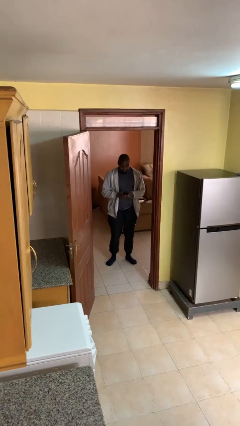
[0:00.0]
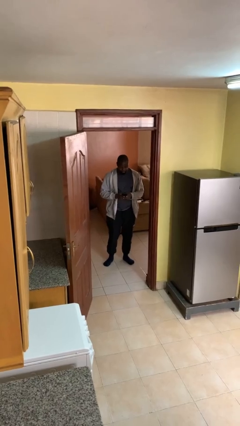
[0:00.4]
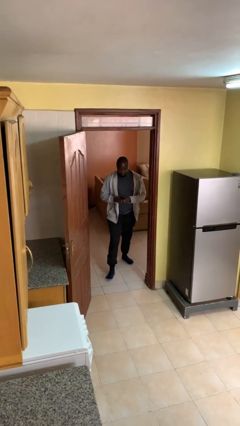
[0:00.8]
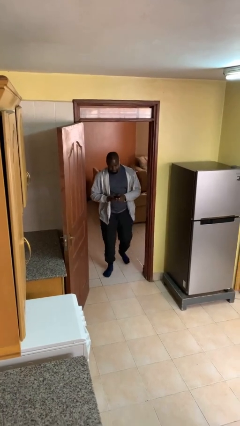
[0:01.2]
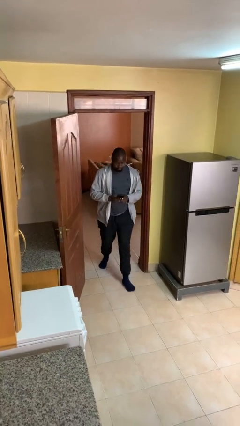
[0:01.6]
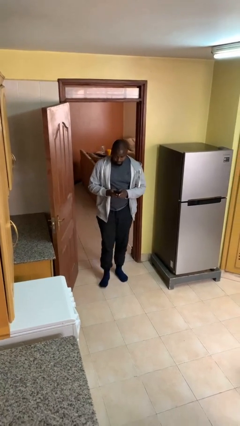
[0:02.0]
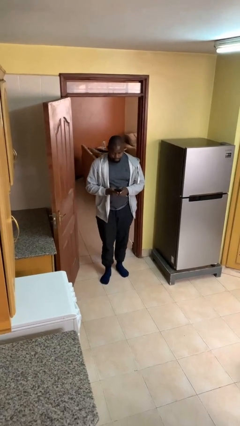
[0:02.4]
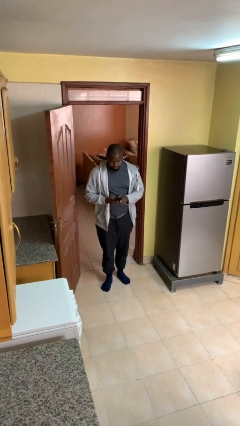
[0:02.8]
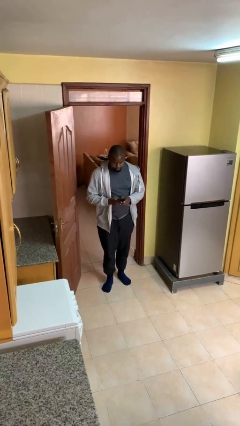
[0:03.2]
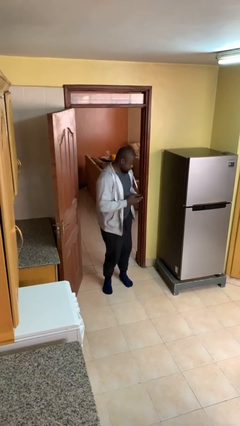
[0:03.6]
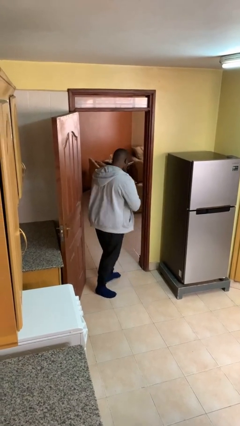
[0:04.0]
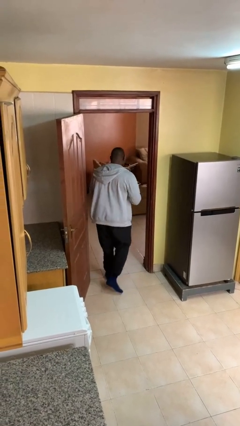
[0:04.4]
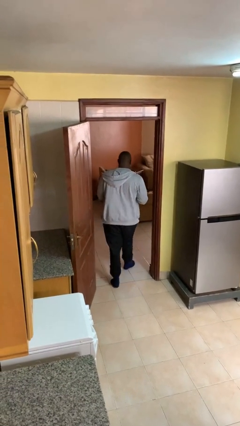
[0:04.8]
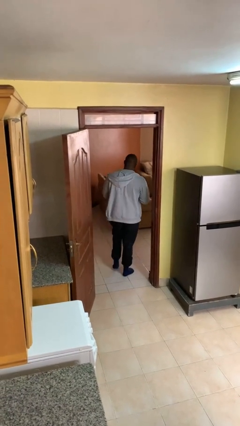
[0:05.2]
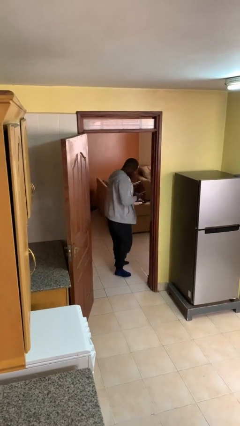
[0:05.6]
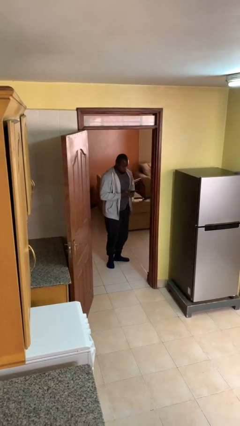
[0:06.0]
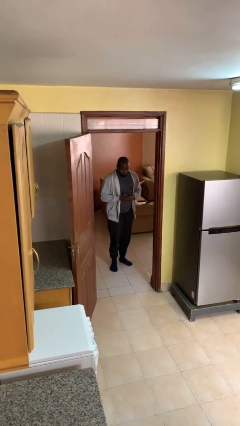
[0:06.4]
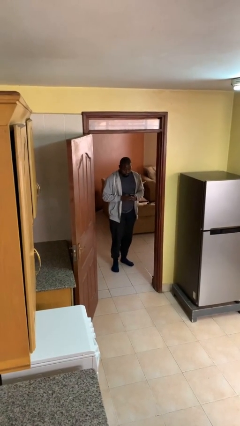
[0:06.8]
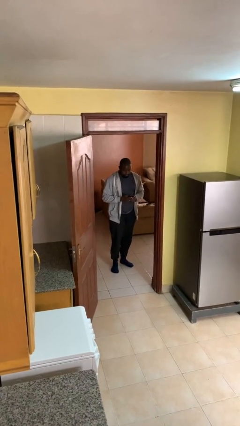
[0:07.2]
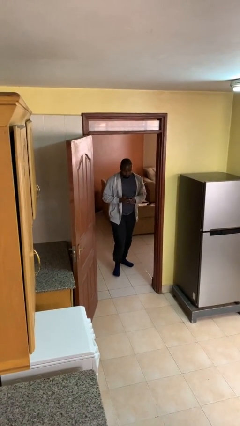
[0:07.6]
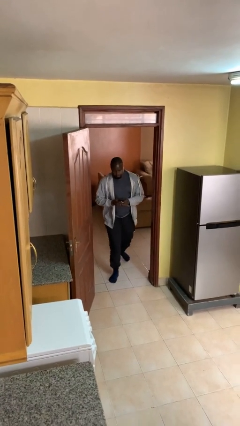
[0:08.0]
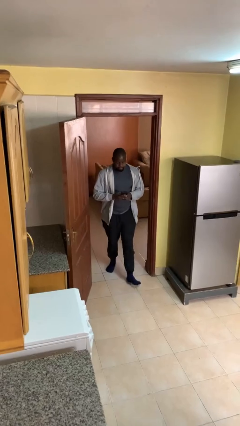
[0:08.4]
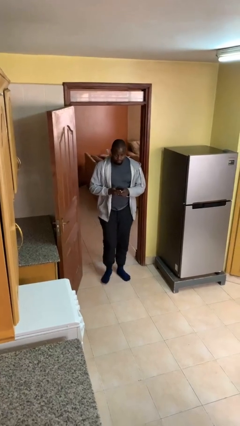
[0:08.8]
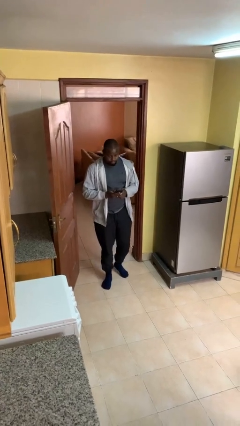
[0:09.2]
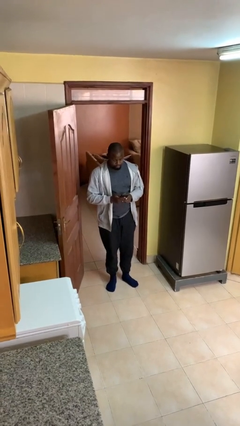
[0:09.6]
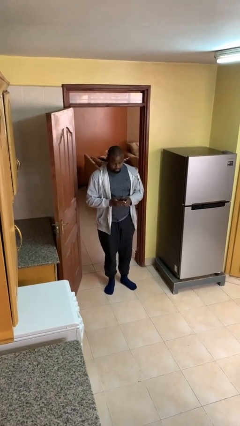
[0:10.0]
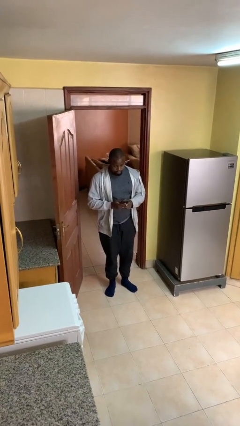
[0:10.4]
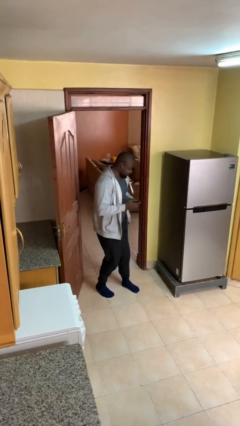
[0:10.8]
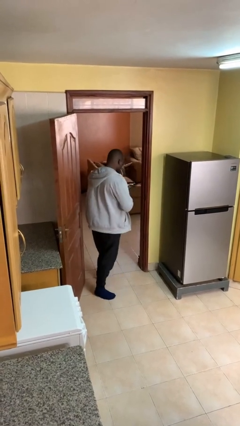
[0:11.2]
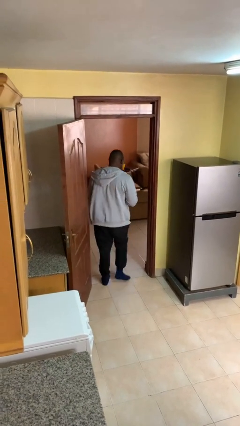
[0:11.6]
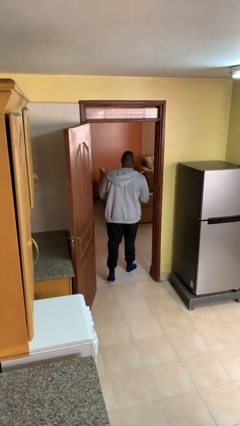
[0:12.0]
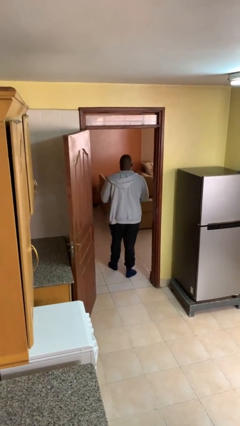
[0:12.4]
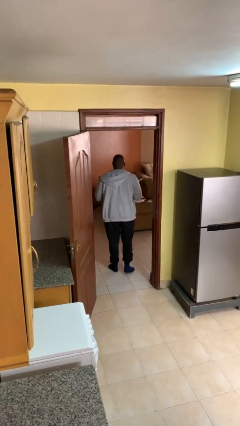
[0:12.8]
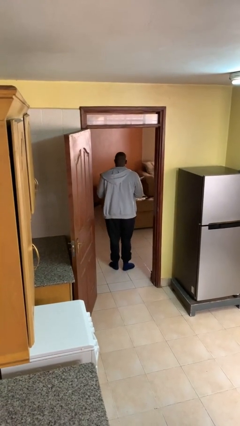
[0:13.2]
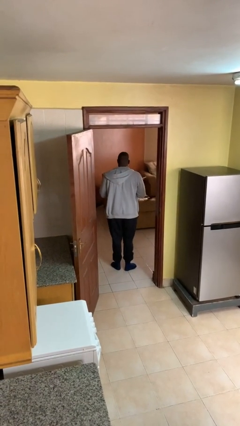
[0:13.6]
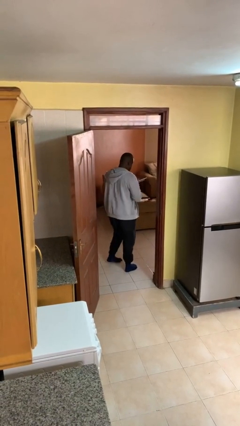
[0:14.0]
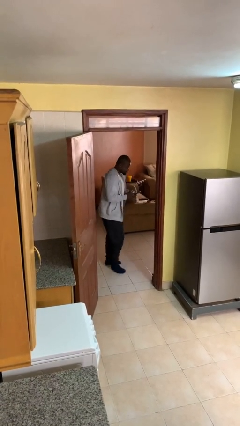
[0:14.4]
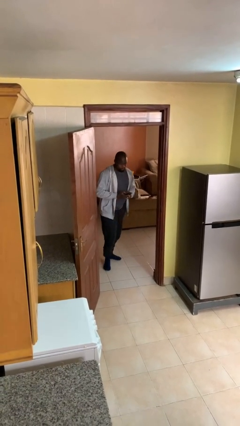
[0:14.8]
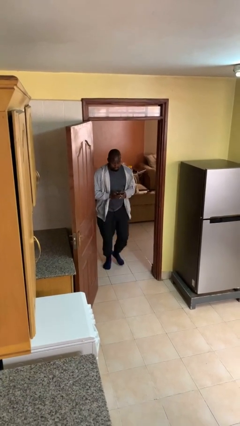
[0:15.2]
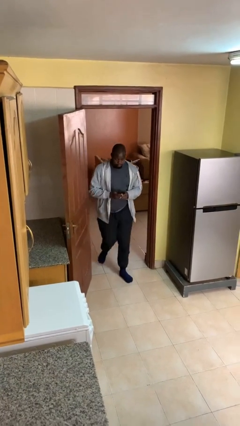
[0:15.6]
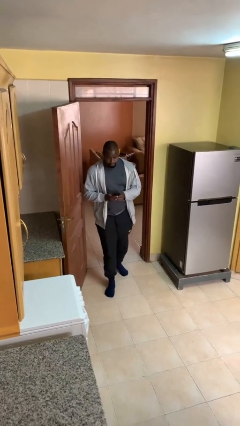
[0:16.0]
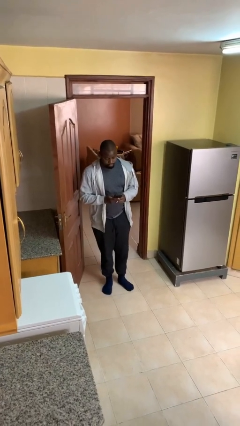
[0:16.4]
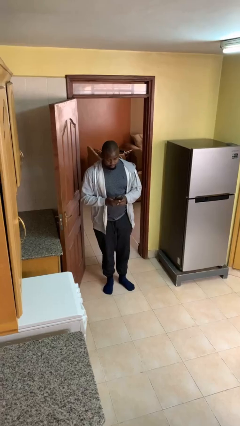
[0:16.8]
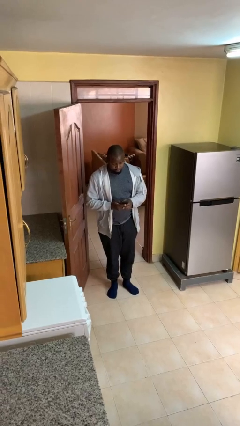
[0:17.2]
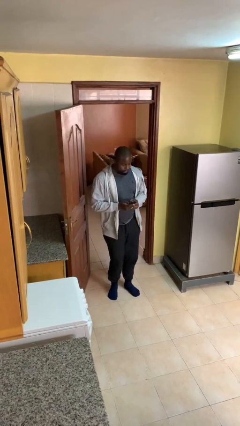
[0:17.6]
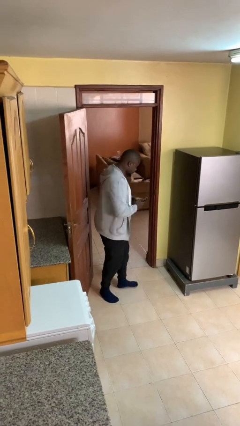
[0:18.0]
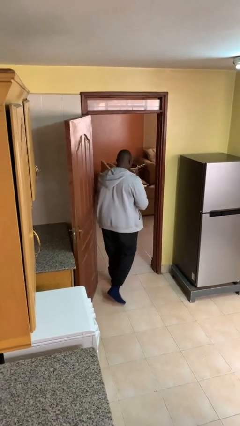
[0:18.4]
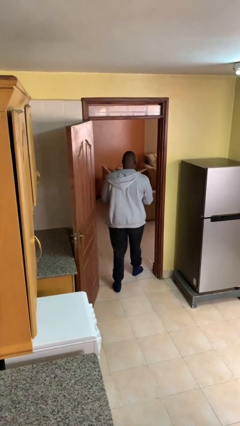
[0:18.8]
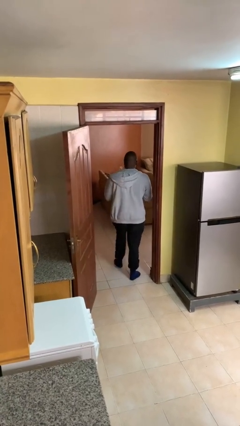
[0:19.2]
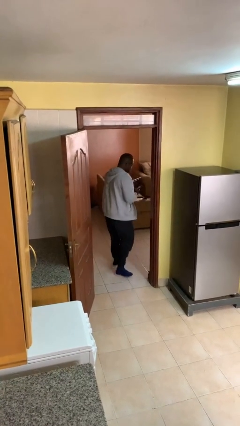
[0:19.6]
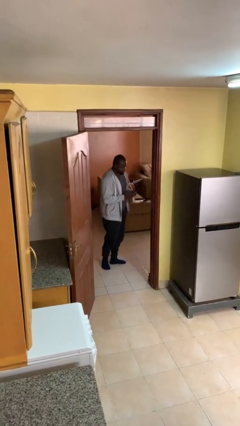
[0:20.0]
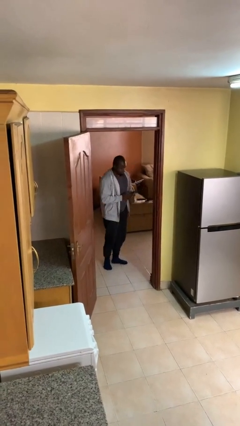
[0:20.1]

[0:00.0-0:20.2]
person texts on phone

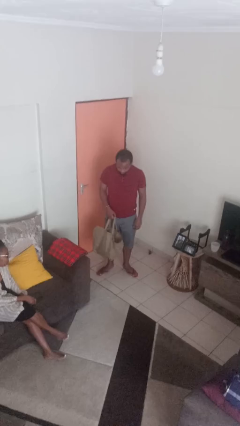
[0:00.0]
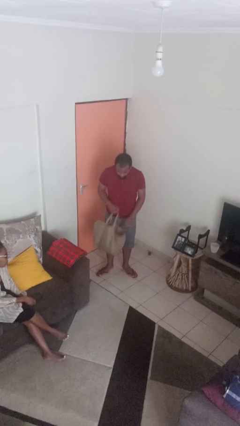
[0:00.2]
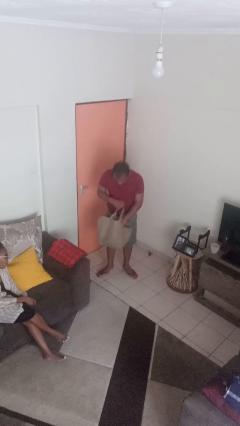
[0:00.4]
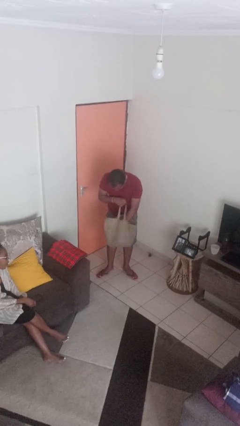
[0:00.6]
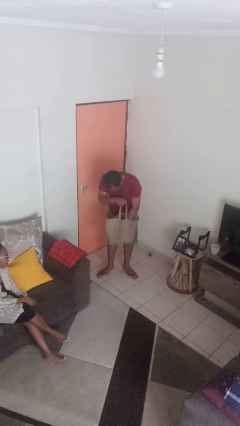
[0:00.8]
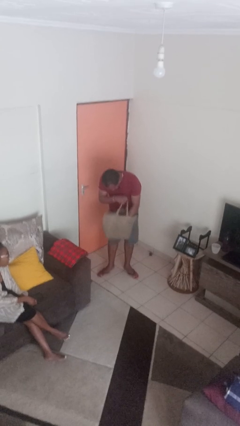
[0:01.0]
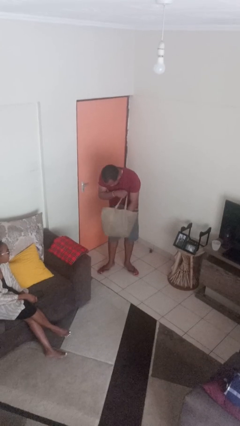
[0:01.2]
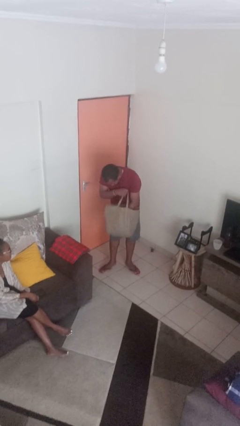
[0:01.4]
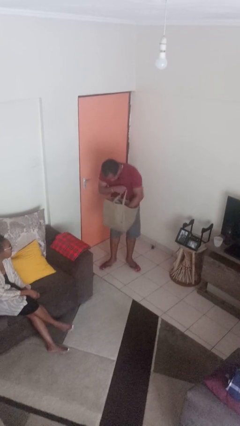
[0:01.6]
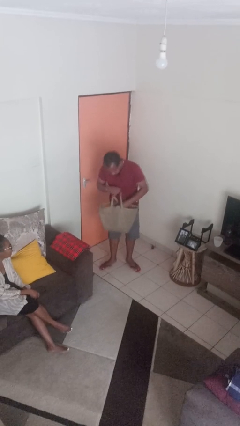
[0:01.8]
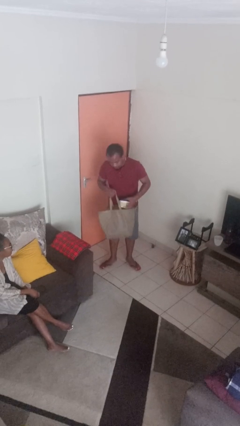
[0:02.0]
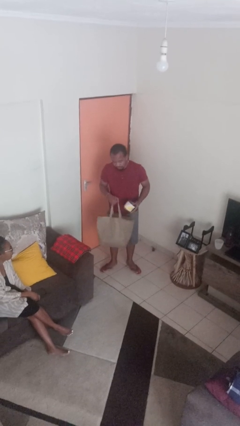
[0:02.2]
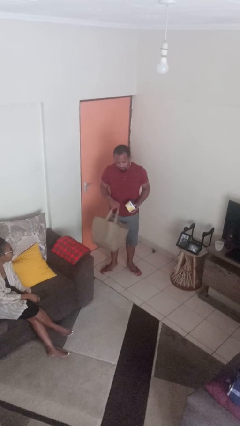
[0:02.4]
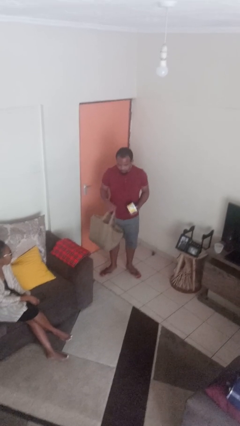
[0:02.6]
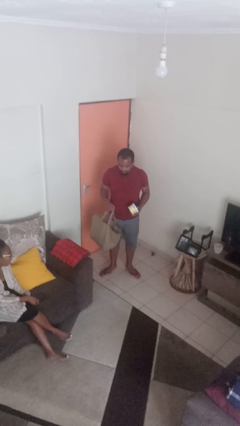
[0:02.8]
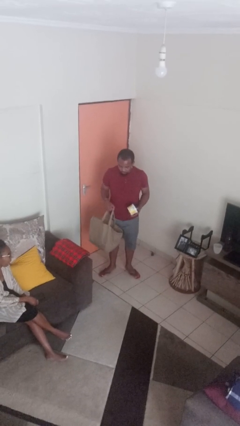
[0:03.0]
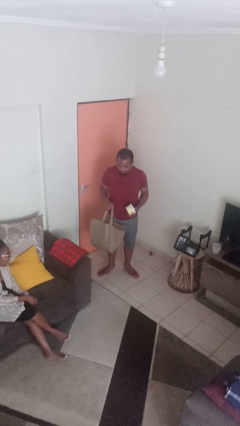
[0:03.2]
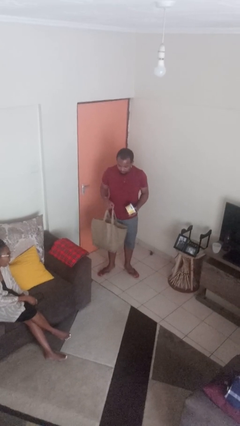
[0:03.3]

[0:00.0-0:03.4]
person takes object from bag

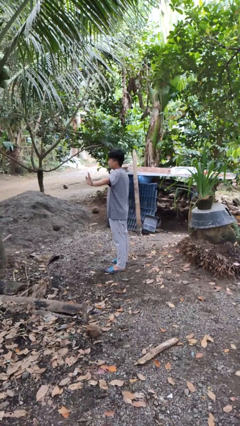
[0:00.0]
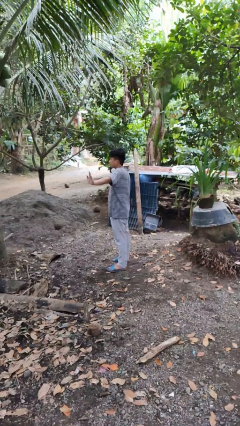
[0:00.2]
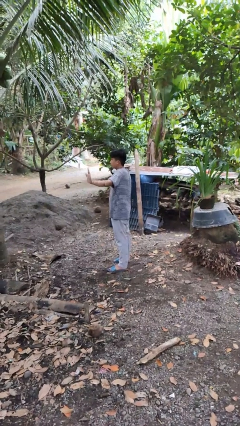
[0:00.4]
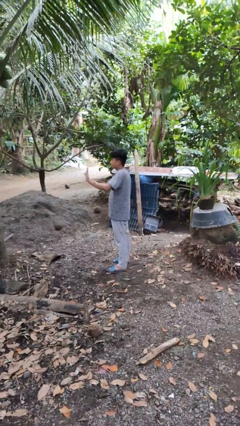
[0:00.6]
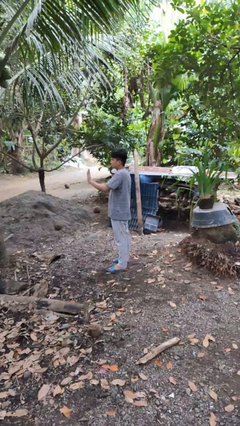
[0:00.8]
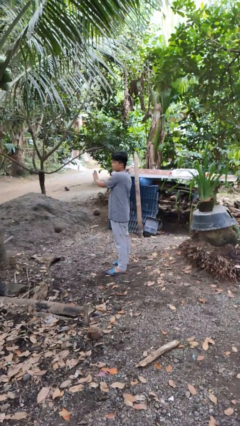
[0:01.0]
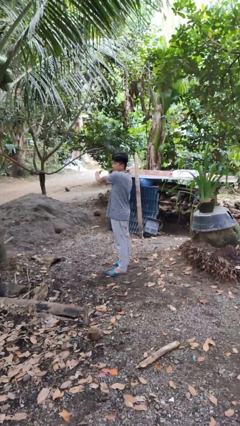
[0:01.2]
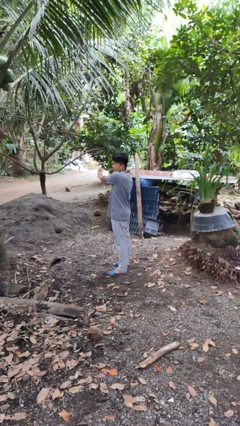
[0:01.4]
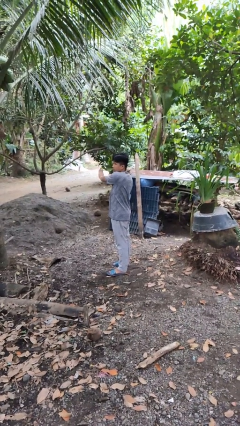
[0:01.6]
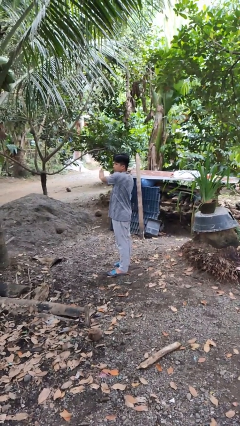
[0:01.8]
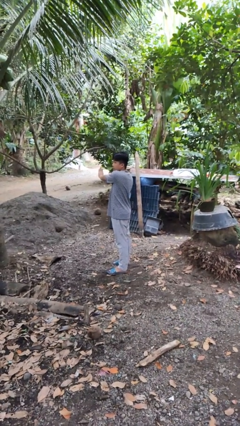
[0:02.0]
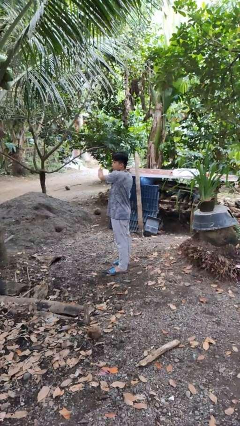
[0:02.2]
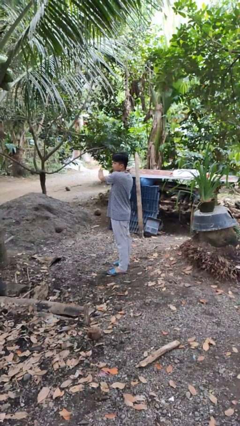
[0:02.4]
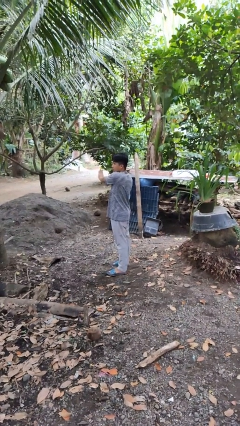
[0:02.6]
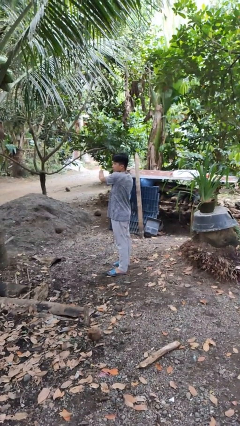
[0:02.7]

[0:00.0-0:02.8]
person gestures swipe right

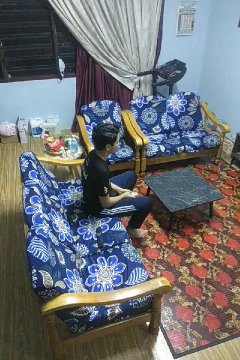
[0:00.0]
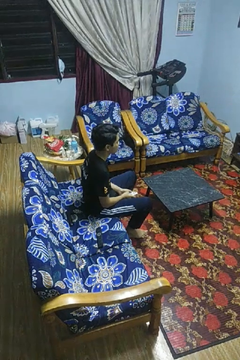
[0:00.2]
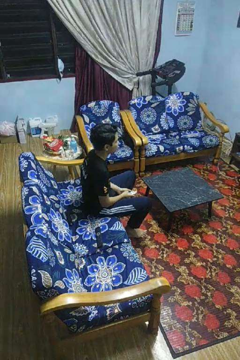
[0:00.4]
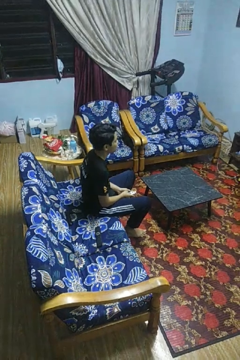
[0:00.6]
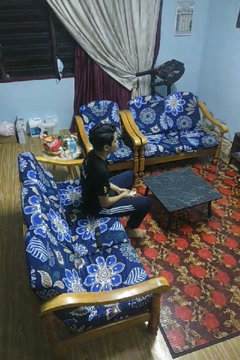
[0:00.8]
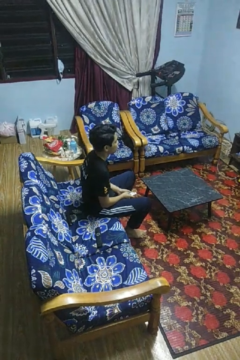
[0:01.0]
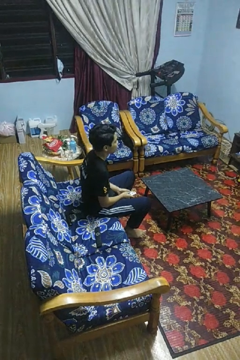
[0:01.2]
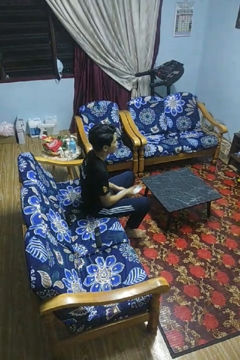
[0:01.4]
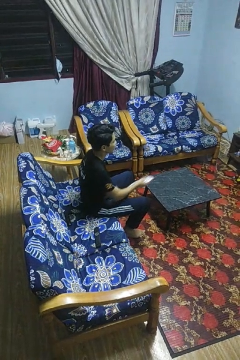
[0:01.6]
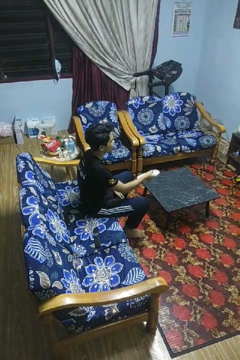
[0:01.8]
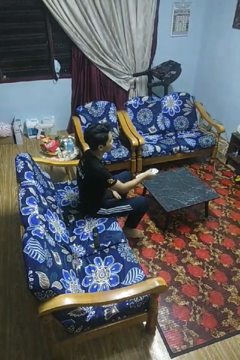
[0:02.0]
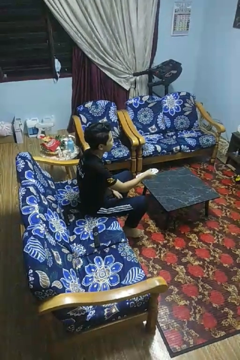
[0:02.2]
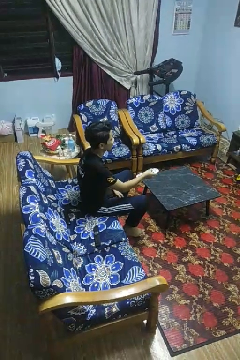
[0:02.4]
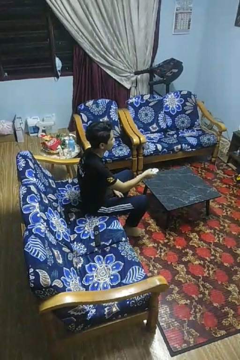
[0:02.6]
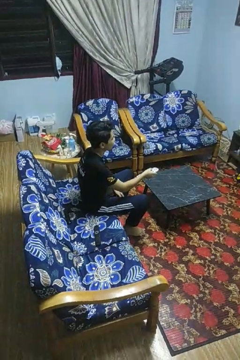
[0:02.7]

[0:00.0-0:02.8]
person uses television remote
